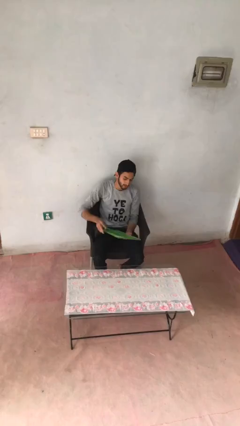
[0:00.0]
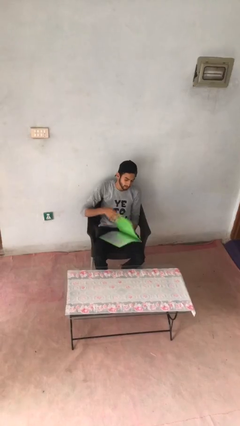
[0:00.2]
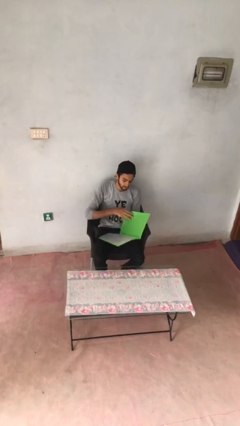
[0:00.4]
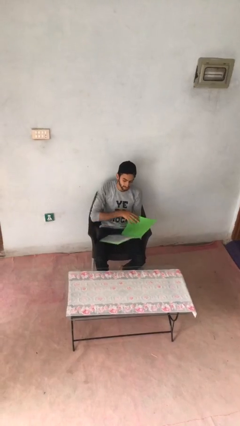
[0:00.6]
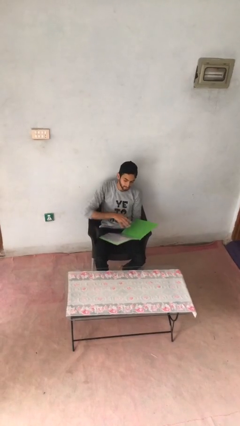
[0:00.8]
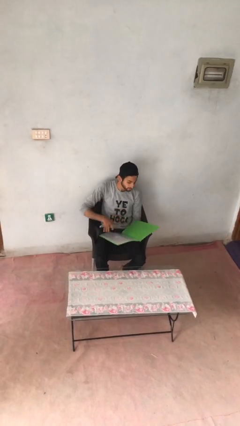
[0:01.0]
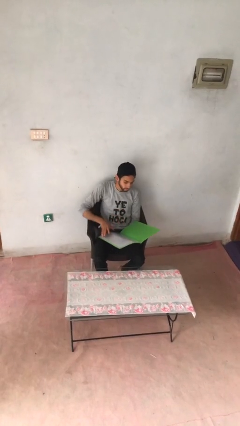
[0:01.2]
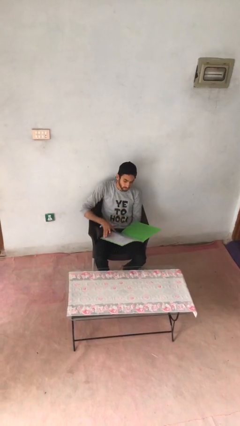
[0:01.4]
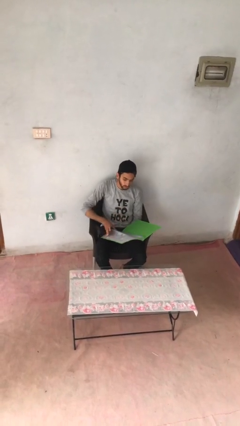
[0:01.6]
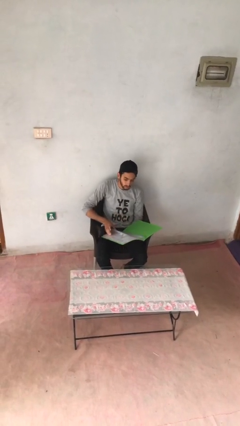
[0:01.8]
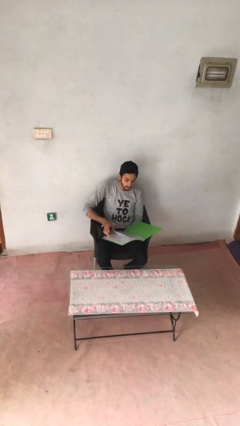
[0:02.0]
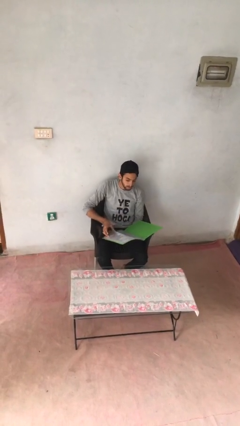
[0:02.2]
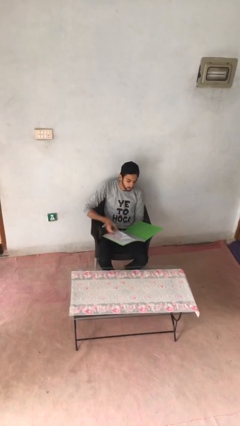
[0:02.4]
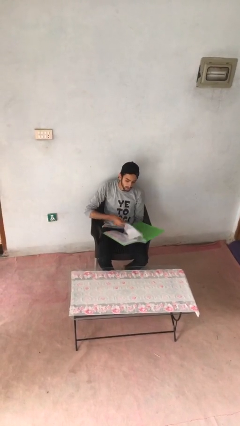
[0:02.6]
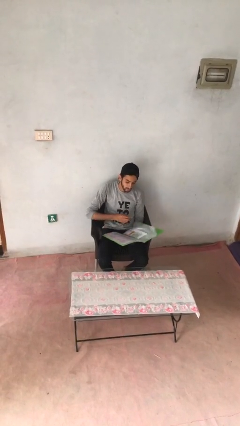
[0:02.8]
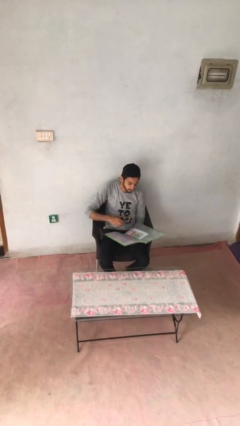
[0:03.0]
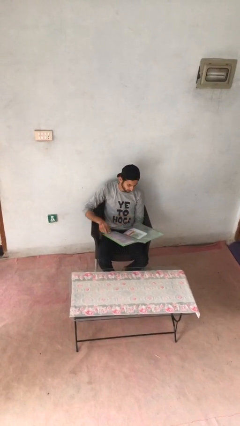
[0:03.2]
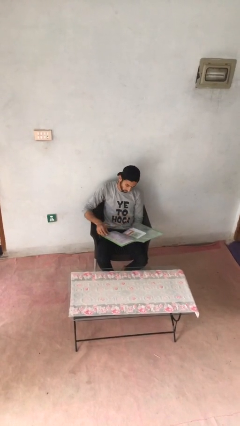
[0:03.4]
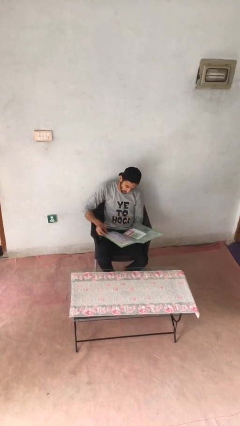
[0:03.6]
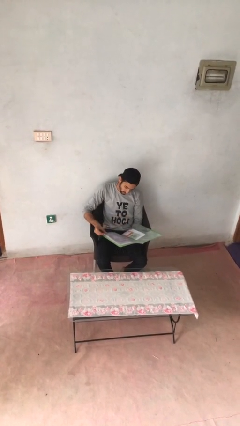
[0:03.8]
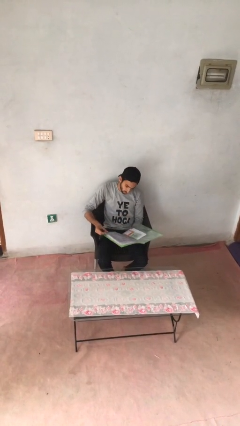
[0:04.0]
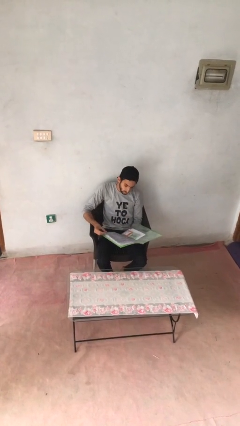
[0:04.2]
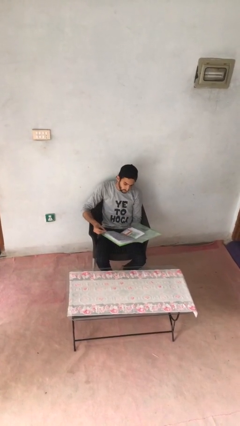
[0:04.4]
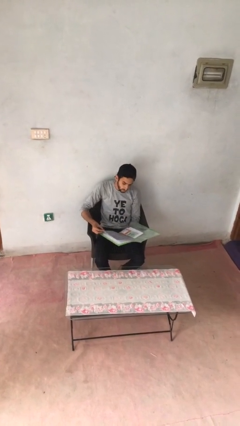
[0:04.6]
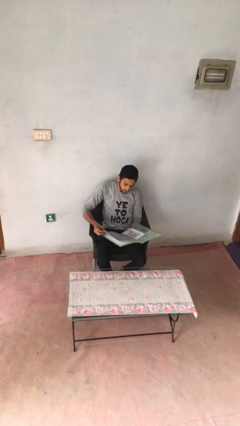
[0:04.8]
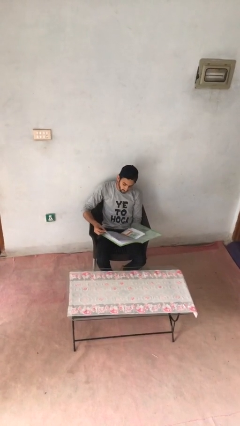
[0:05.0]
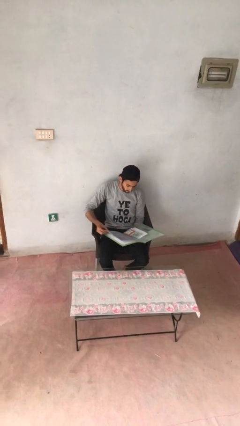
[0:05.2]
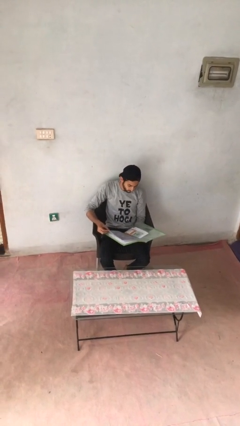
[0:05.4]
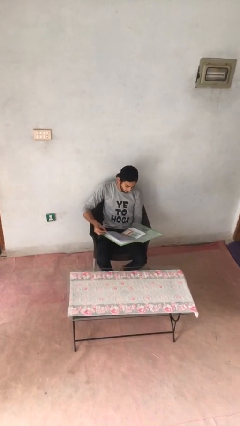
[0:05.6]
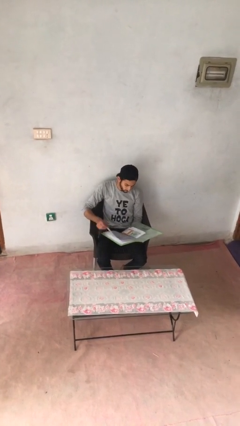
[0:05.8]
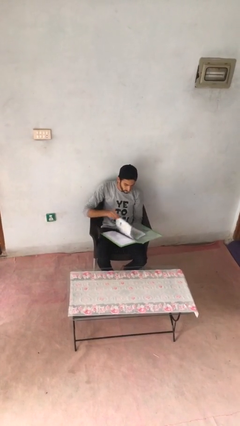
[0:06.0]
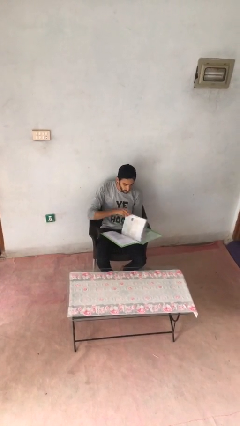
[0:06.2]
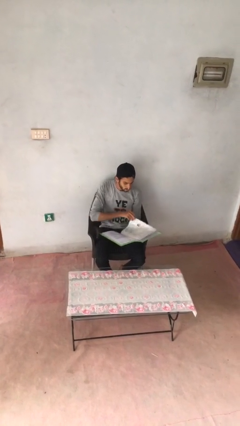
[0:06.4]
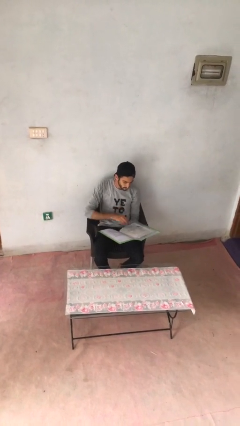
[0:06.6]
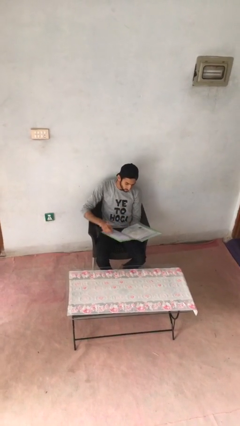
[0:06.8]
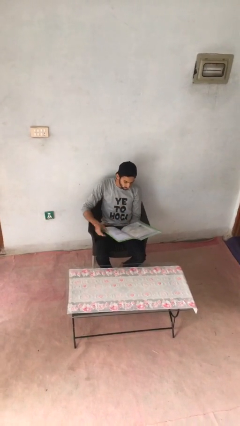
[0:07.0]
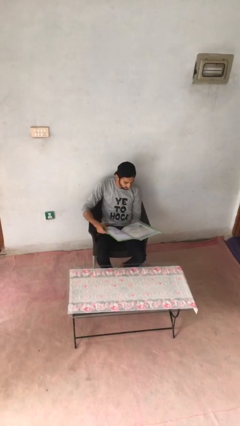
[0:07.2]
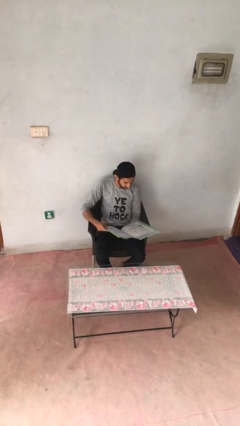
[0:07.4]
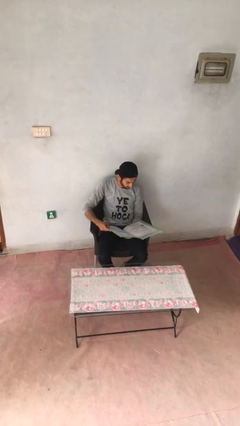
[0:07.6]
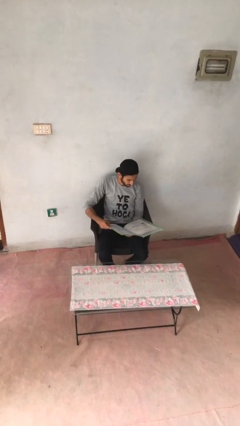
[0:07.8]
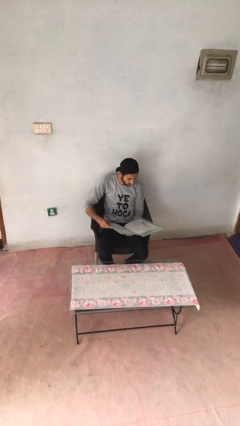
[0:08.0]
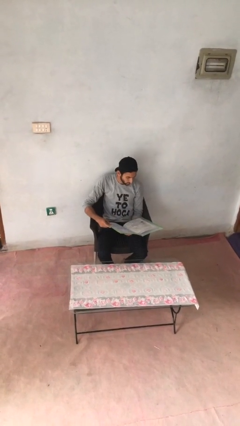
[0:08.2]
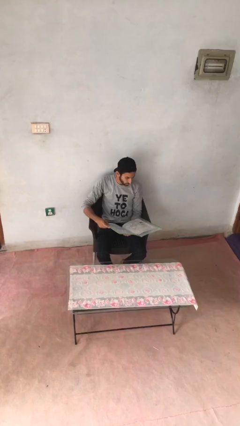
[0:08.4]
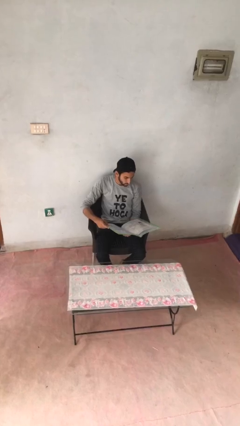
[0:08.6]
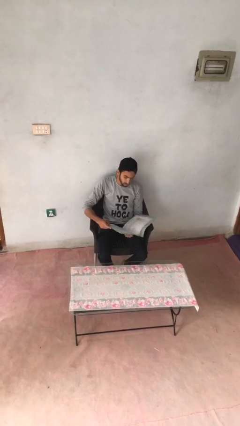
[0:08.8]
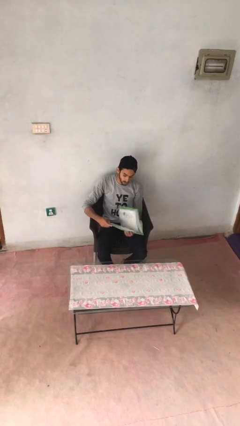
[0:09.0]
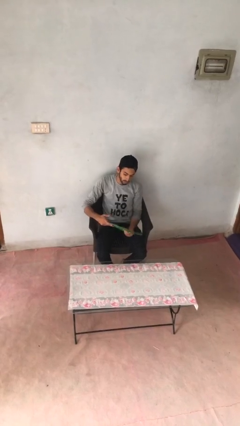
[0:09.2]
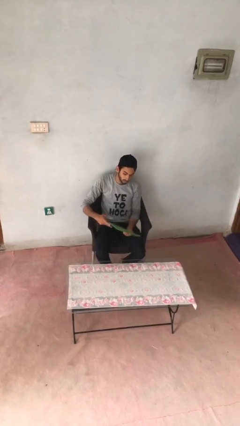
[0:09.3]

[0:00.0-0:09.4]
person reads document

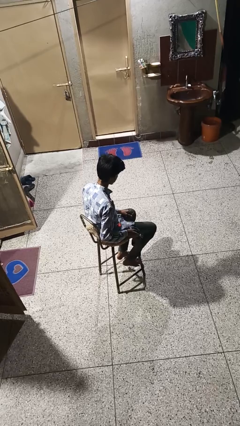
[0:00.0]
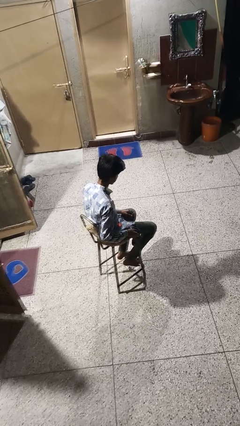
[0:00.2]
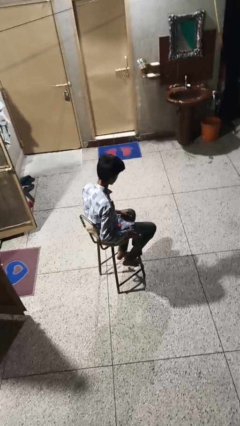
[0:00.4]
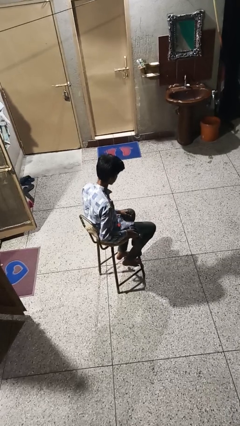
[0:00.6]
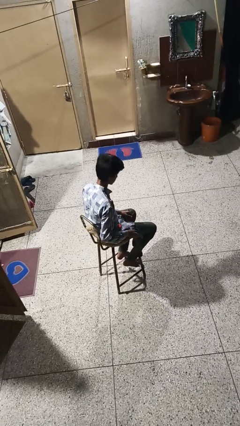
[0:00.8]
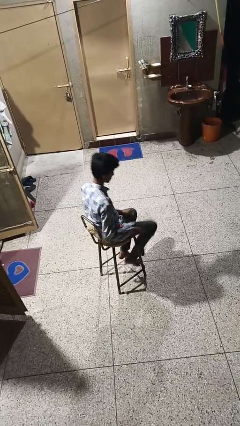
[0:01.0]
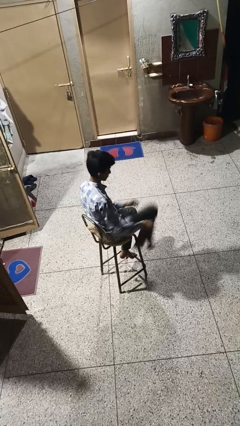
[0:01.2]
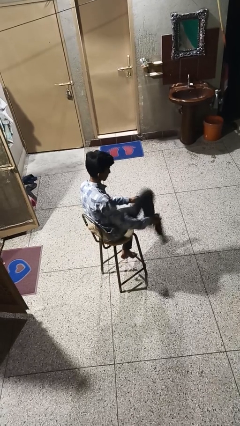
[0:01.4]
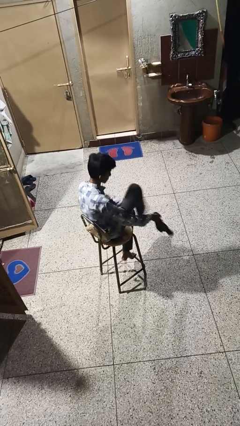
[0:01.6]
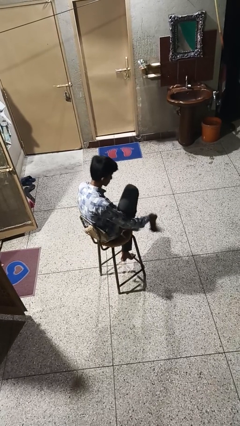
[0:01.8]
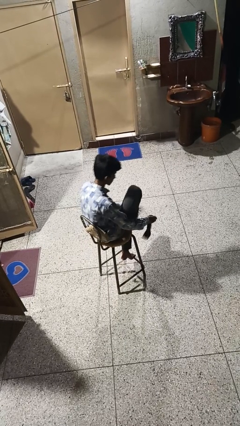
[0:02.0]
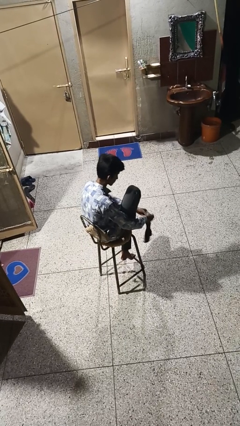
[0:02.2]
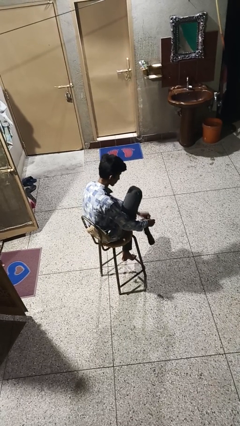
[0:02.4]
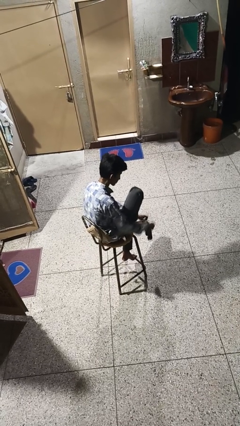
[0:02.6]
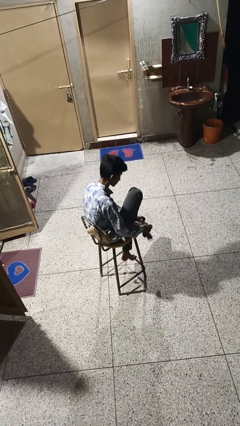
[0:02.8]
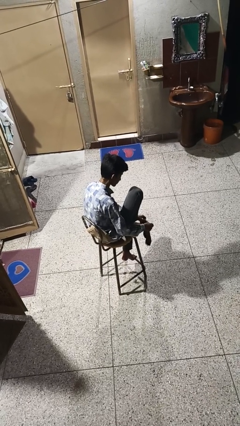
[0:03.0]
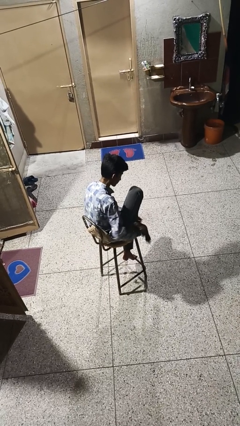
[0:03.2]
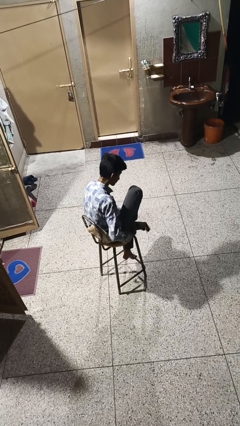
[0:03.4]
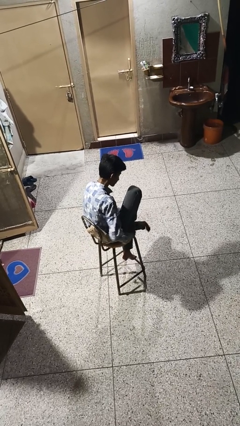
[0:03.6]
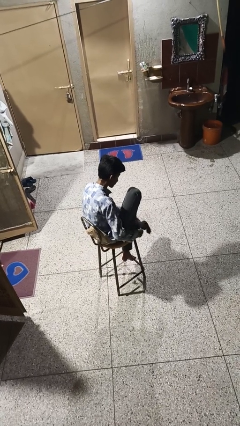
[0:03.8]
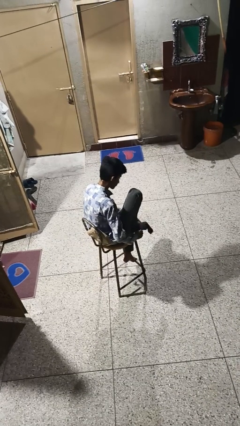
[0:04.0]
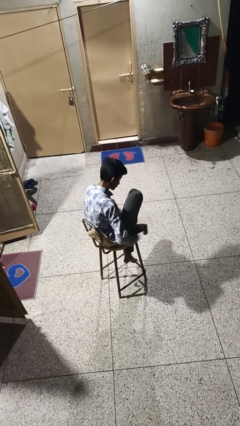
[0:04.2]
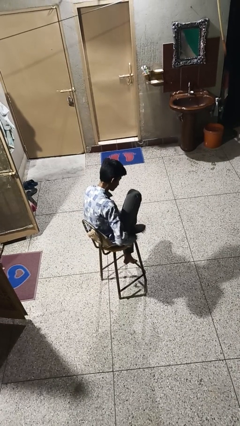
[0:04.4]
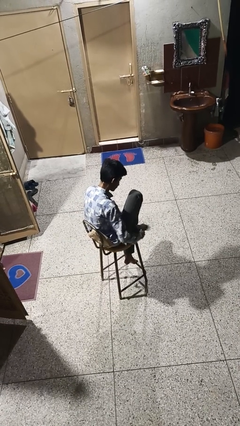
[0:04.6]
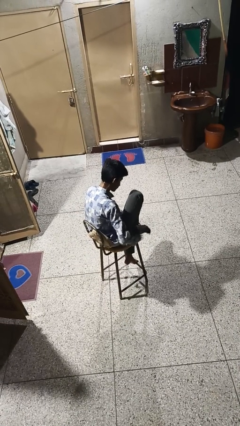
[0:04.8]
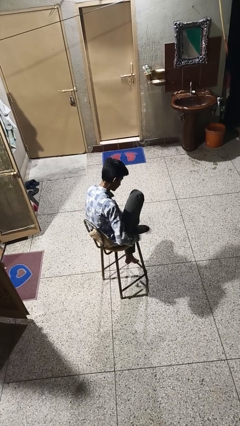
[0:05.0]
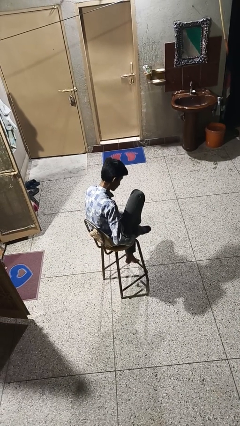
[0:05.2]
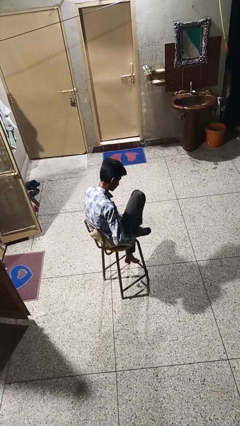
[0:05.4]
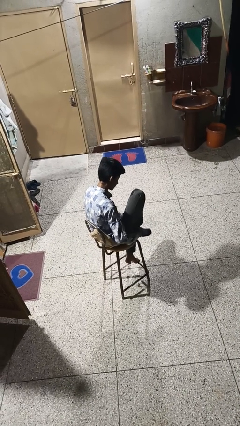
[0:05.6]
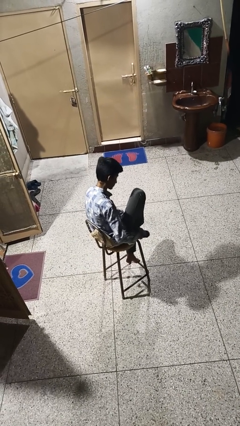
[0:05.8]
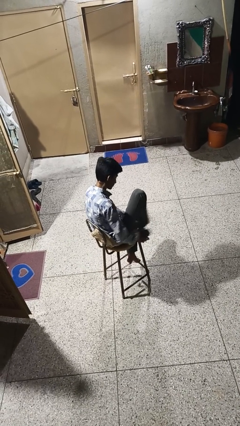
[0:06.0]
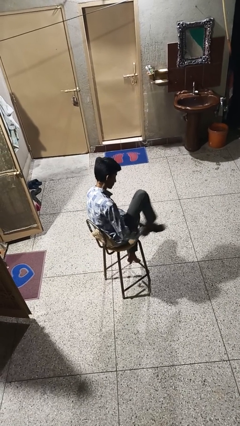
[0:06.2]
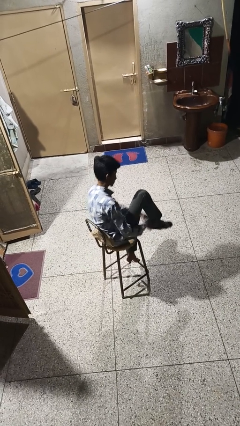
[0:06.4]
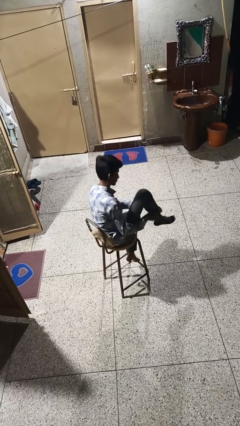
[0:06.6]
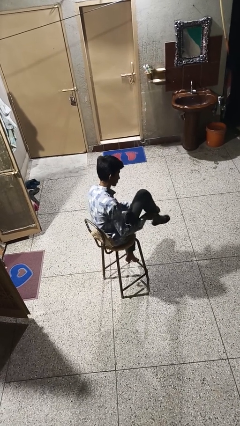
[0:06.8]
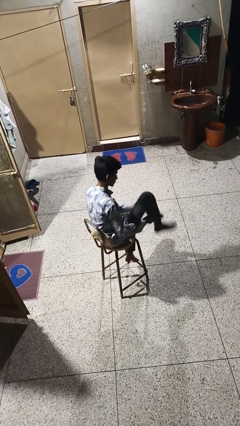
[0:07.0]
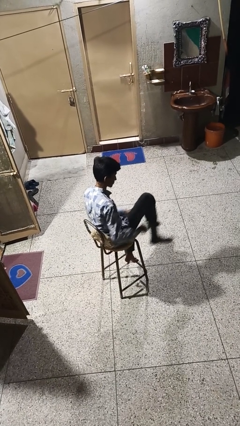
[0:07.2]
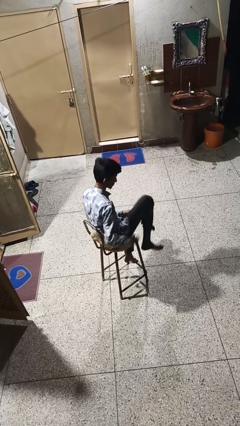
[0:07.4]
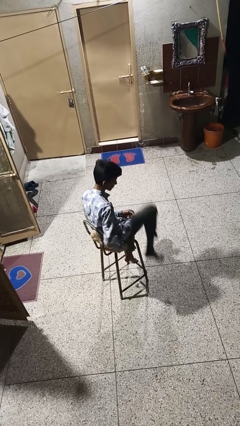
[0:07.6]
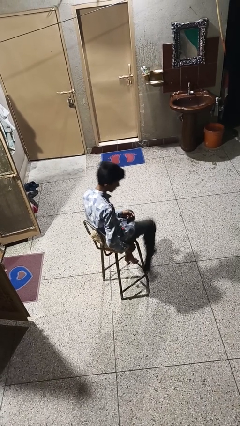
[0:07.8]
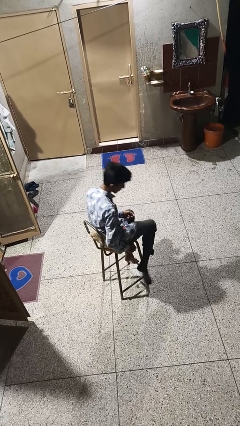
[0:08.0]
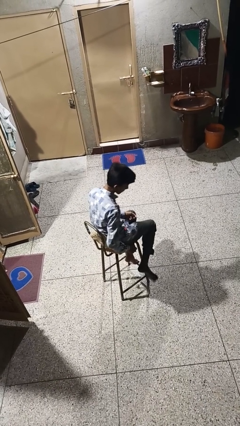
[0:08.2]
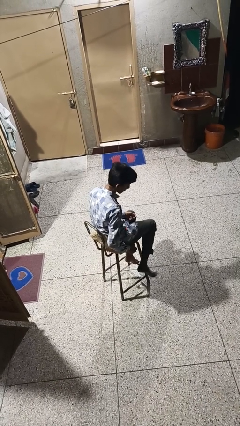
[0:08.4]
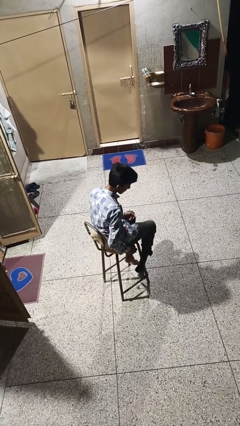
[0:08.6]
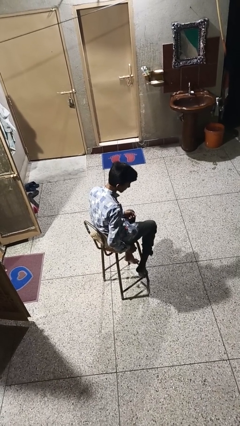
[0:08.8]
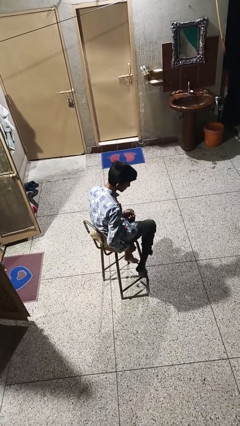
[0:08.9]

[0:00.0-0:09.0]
person puts on socks
